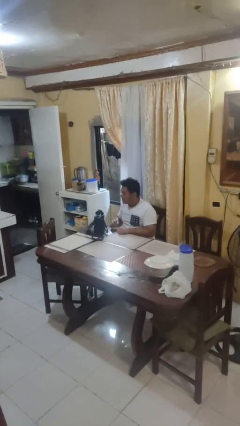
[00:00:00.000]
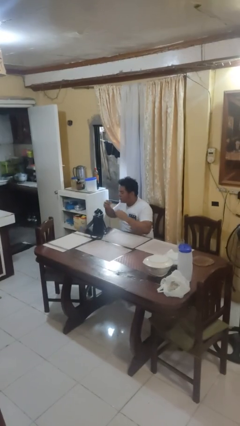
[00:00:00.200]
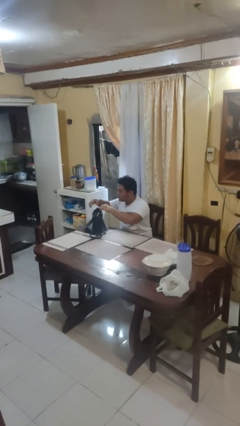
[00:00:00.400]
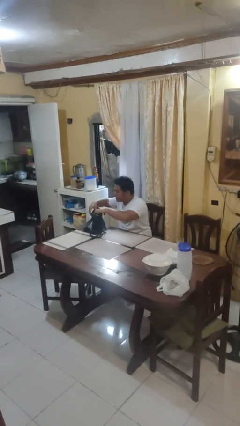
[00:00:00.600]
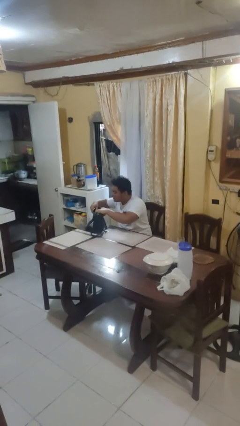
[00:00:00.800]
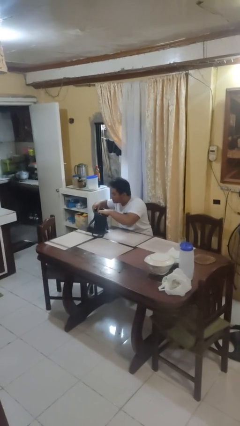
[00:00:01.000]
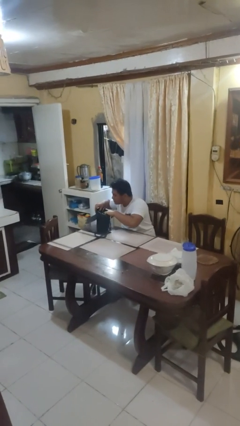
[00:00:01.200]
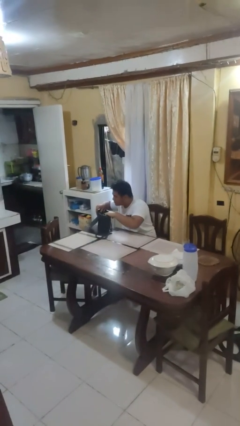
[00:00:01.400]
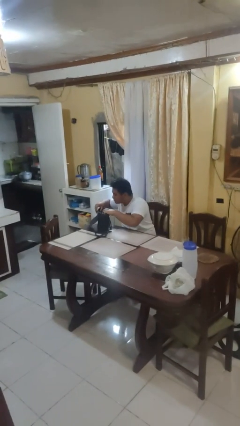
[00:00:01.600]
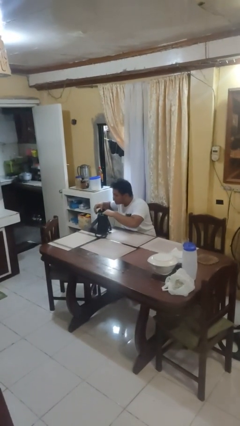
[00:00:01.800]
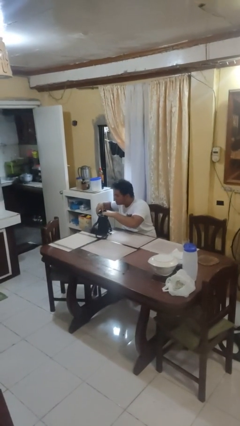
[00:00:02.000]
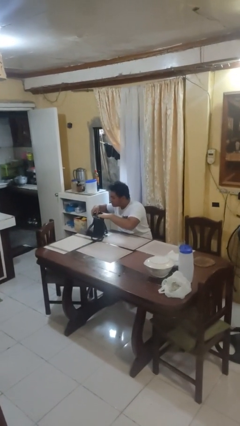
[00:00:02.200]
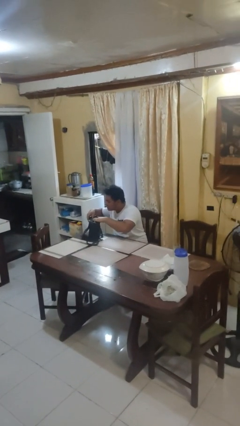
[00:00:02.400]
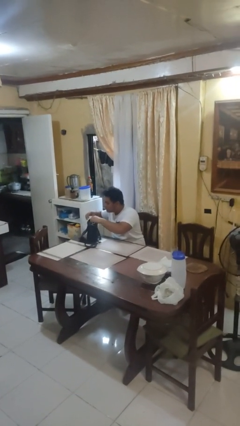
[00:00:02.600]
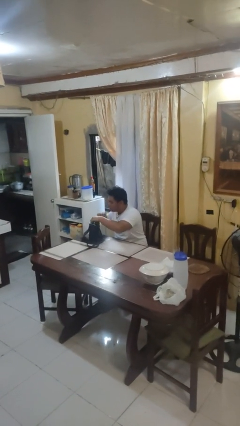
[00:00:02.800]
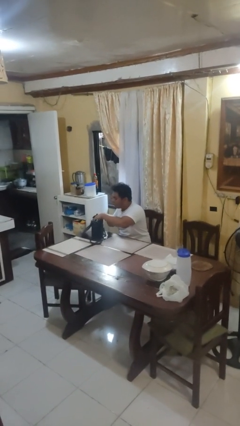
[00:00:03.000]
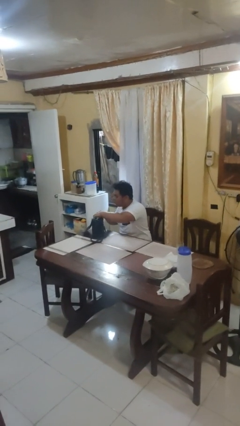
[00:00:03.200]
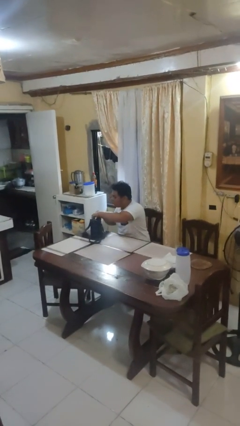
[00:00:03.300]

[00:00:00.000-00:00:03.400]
person searches in purse

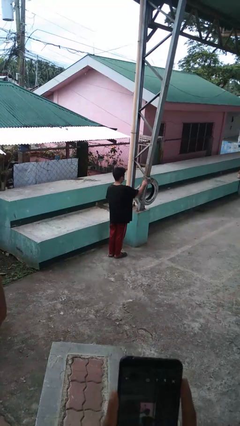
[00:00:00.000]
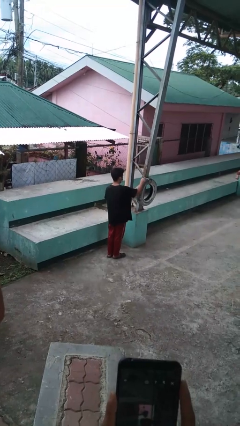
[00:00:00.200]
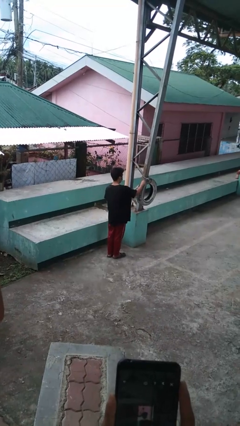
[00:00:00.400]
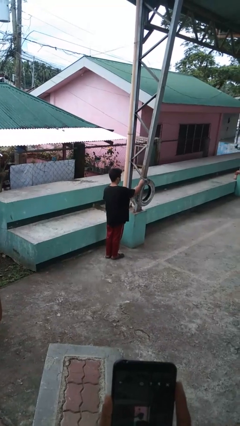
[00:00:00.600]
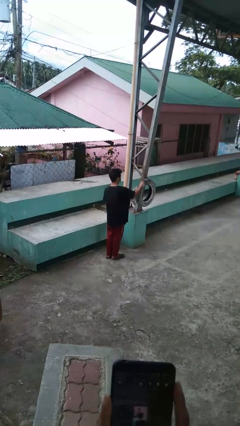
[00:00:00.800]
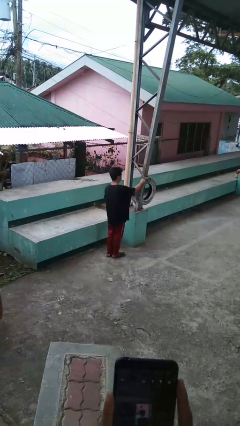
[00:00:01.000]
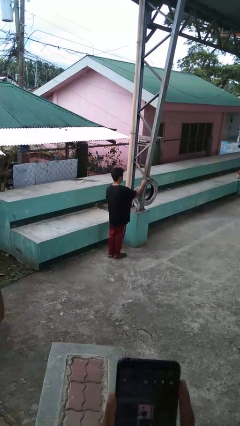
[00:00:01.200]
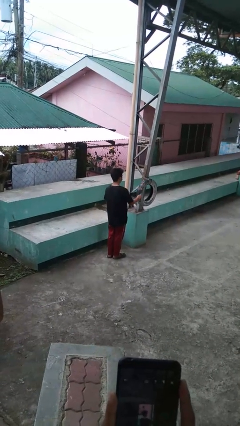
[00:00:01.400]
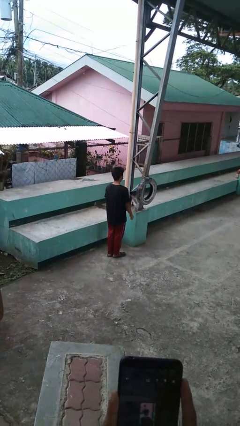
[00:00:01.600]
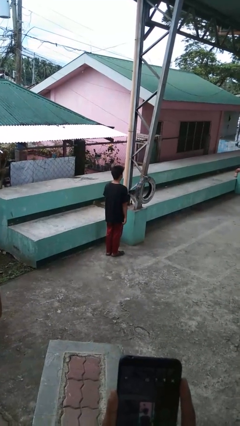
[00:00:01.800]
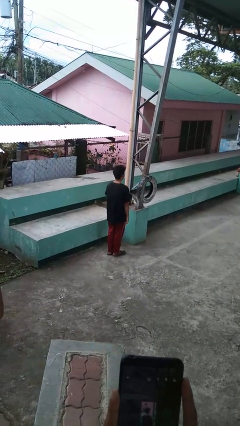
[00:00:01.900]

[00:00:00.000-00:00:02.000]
person taps object with finger

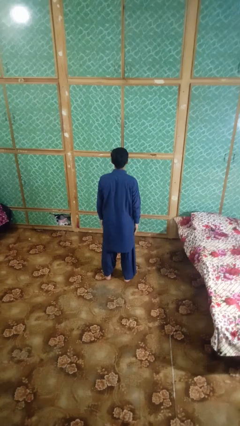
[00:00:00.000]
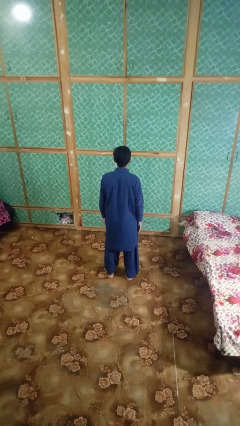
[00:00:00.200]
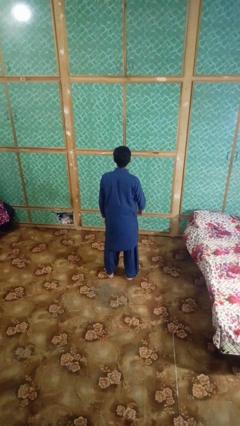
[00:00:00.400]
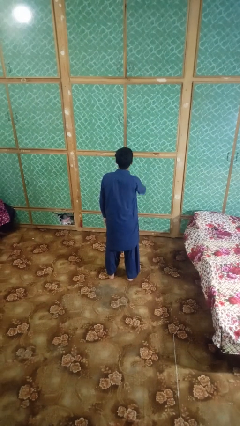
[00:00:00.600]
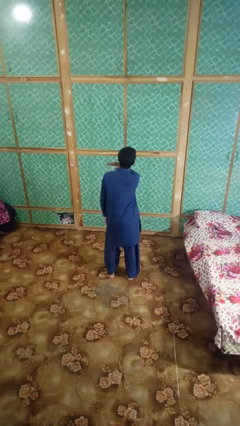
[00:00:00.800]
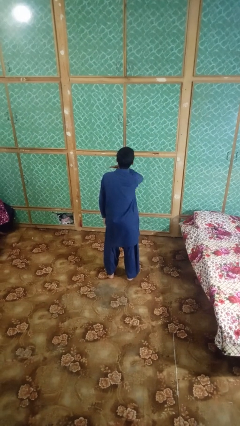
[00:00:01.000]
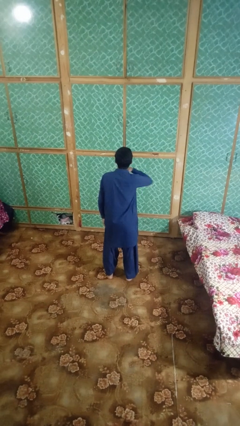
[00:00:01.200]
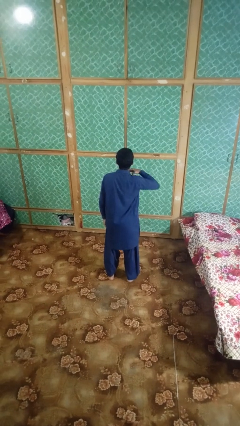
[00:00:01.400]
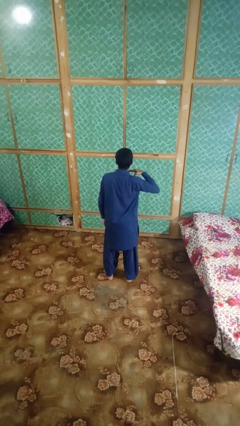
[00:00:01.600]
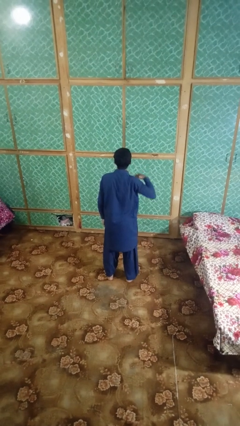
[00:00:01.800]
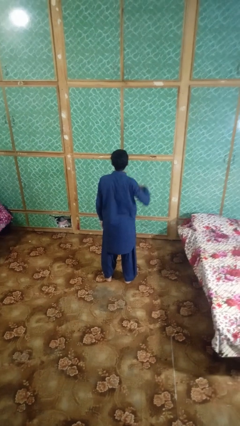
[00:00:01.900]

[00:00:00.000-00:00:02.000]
person gestures cut

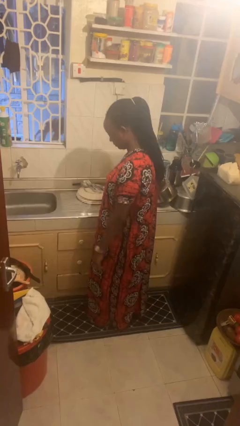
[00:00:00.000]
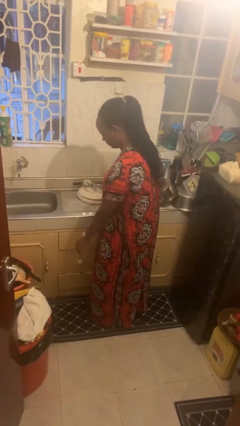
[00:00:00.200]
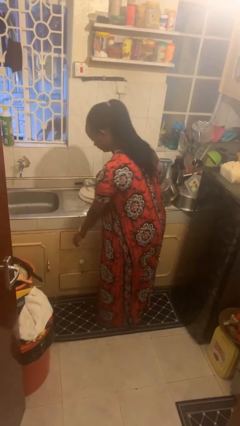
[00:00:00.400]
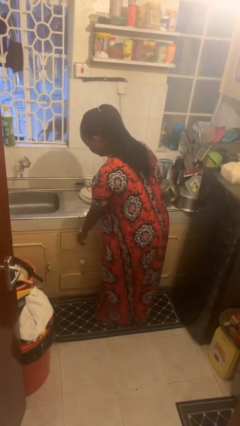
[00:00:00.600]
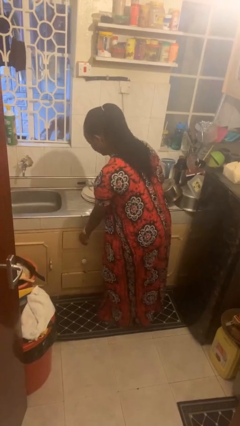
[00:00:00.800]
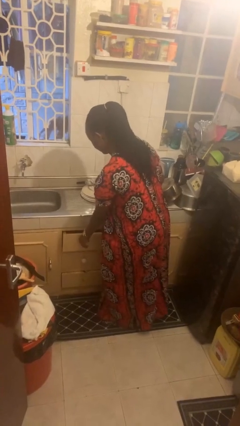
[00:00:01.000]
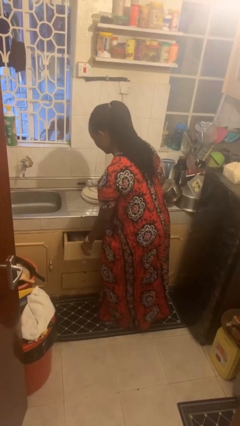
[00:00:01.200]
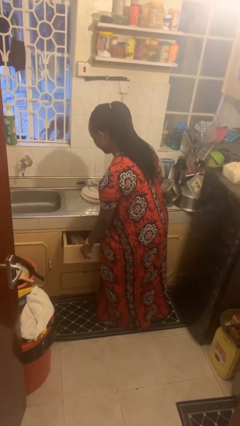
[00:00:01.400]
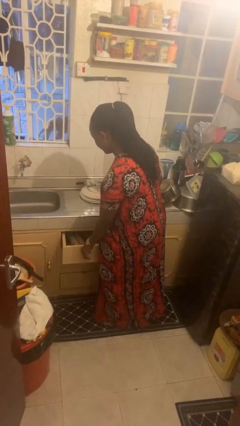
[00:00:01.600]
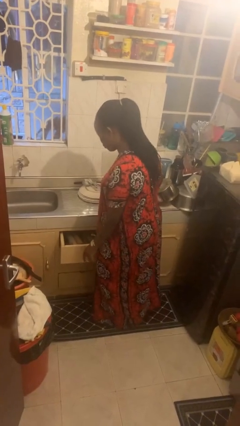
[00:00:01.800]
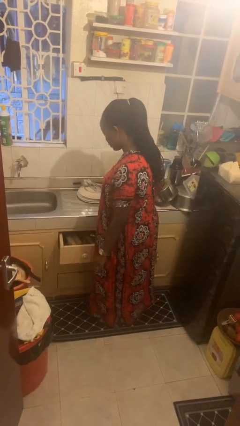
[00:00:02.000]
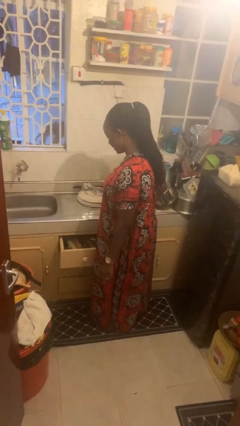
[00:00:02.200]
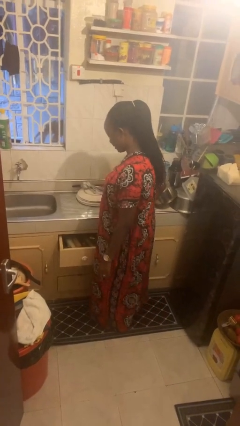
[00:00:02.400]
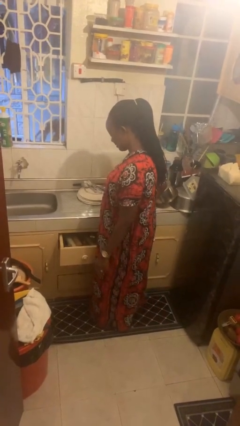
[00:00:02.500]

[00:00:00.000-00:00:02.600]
person opens kitchen drawer

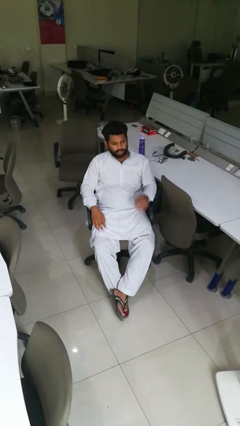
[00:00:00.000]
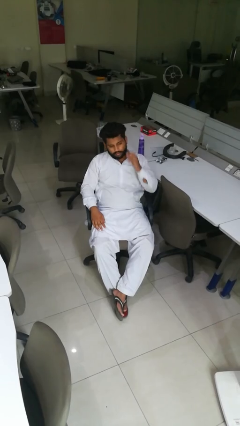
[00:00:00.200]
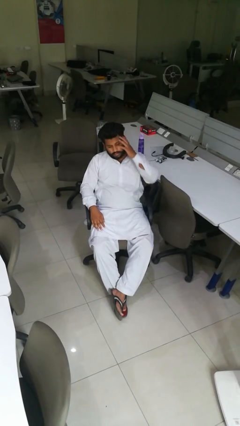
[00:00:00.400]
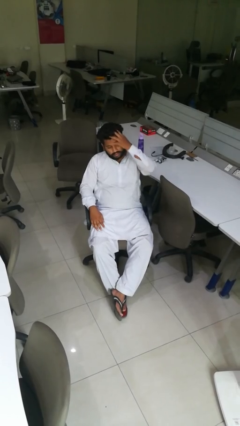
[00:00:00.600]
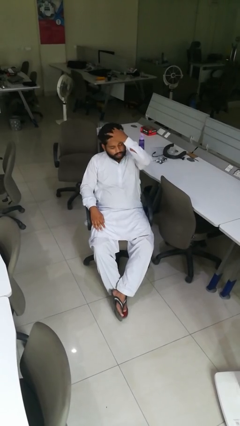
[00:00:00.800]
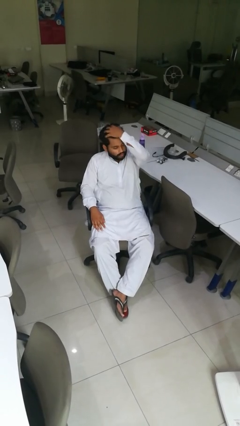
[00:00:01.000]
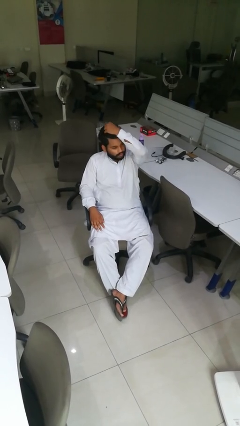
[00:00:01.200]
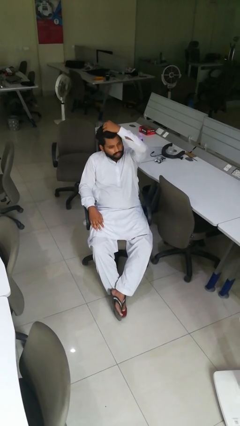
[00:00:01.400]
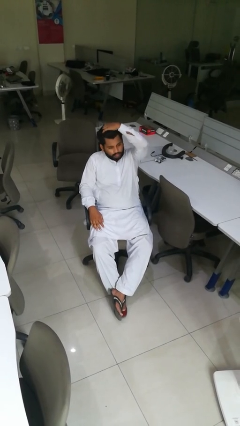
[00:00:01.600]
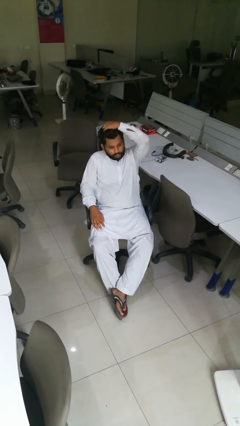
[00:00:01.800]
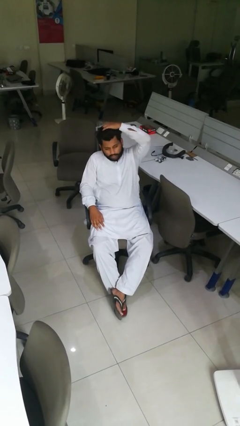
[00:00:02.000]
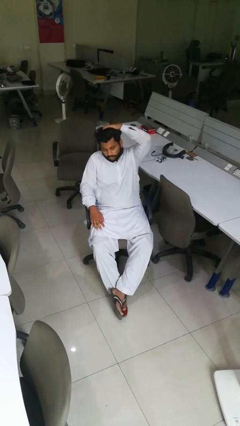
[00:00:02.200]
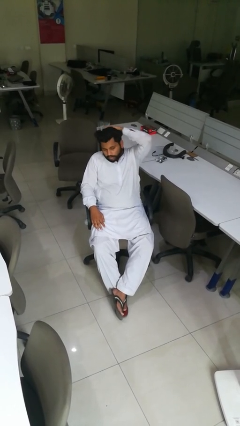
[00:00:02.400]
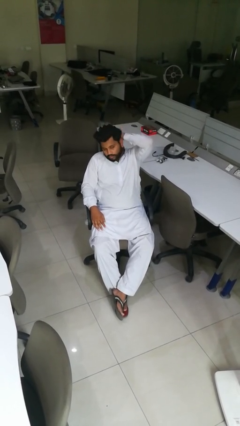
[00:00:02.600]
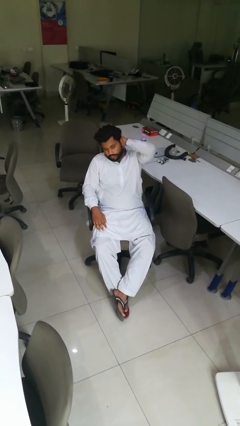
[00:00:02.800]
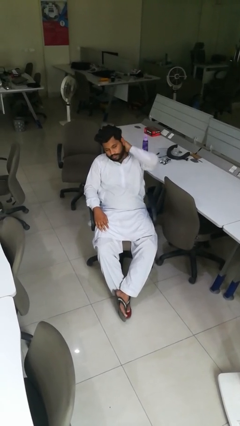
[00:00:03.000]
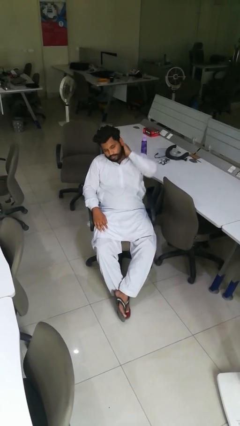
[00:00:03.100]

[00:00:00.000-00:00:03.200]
person strokes hair

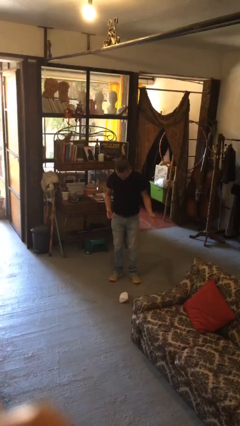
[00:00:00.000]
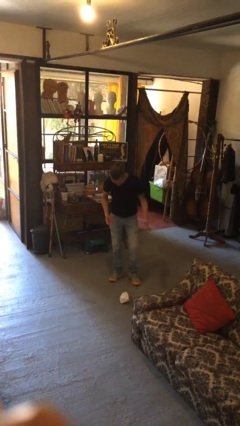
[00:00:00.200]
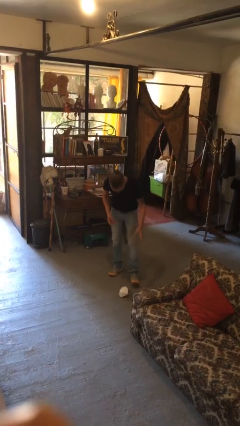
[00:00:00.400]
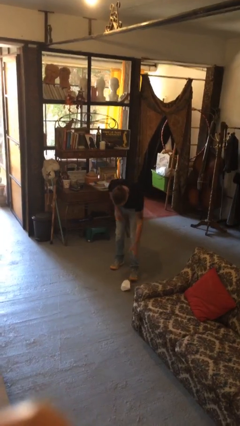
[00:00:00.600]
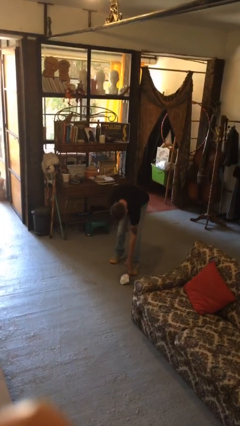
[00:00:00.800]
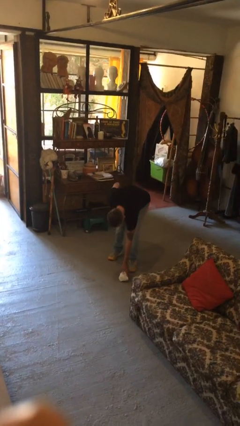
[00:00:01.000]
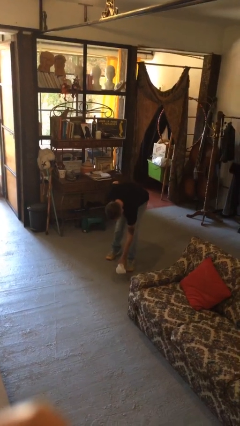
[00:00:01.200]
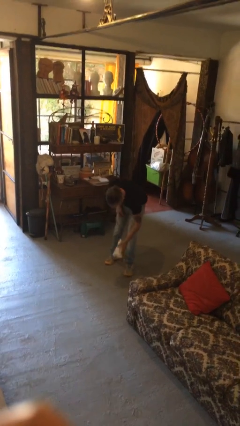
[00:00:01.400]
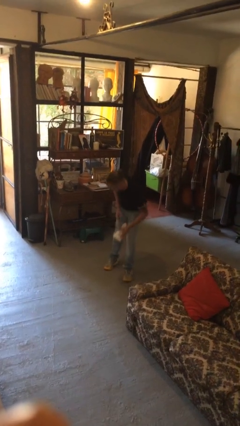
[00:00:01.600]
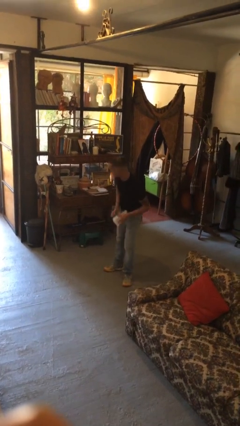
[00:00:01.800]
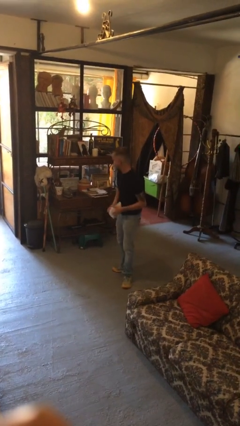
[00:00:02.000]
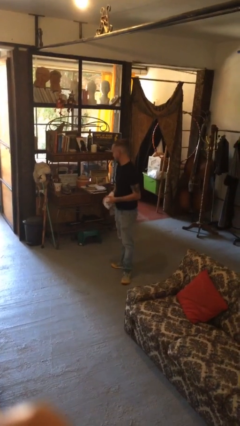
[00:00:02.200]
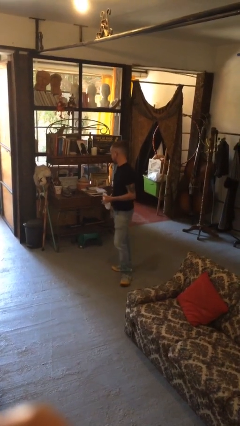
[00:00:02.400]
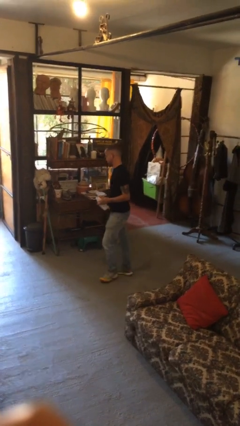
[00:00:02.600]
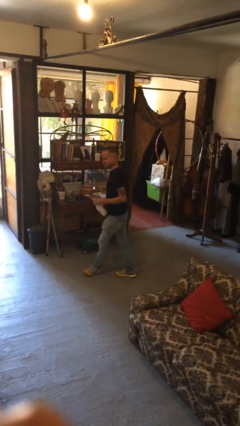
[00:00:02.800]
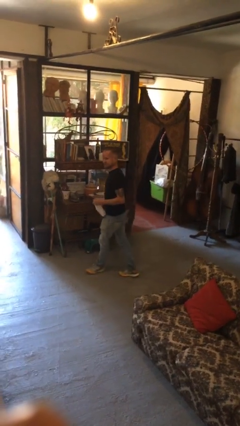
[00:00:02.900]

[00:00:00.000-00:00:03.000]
person picks up object from floor

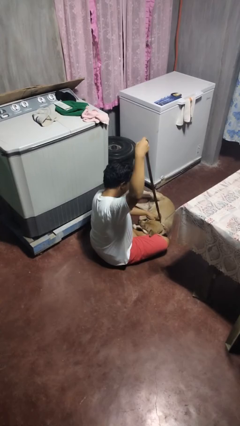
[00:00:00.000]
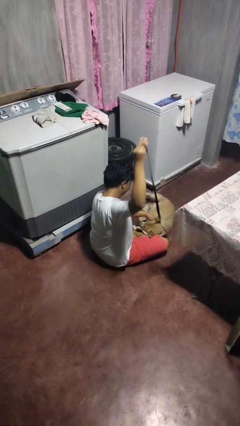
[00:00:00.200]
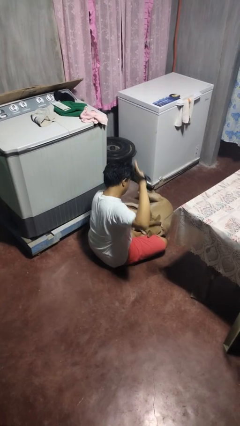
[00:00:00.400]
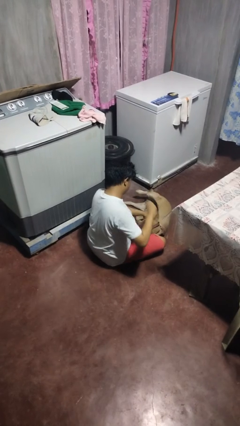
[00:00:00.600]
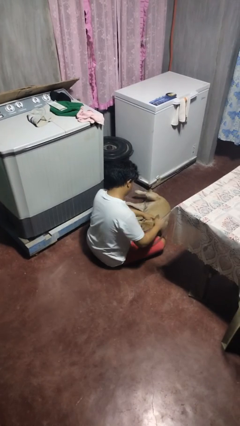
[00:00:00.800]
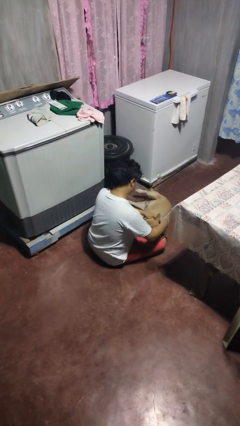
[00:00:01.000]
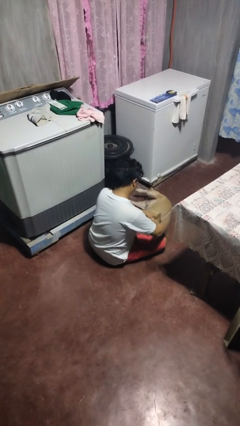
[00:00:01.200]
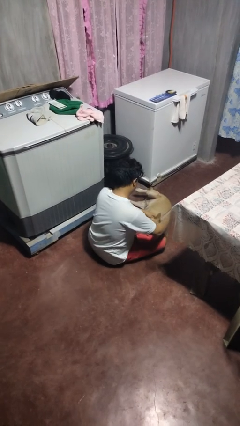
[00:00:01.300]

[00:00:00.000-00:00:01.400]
person unattaches leash from dog
